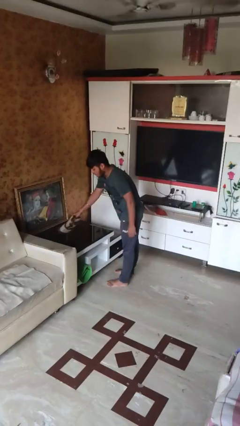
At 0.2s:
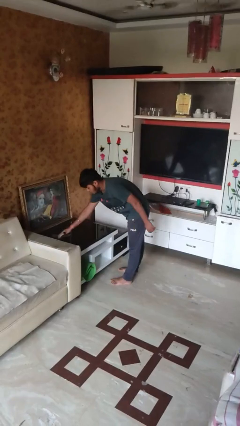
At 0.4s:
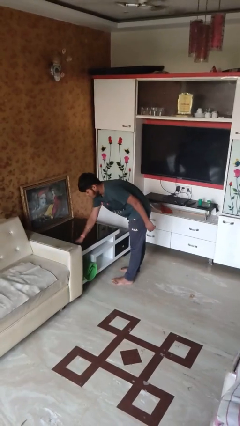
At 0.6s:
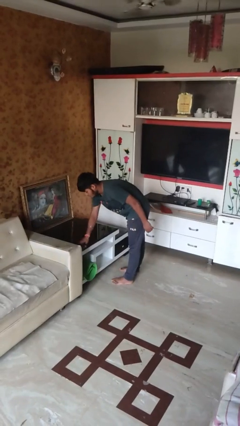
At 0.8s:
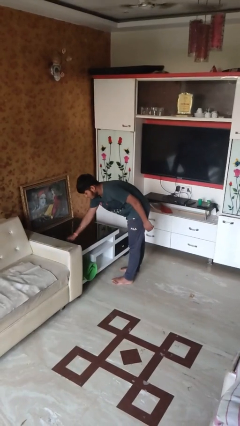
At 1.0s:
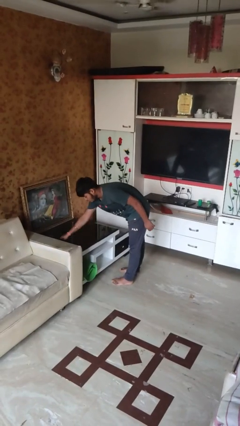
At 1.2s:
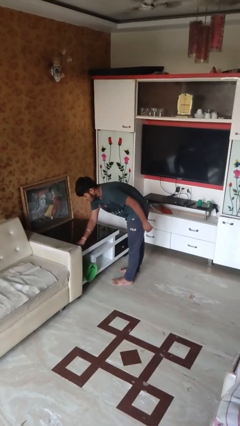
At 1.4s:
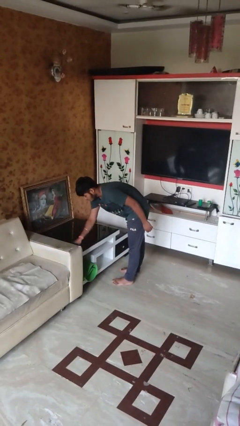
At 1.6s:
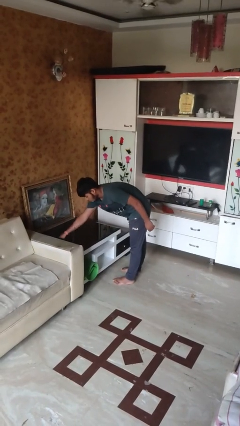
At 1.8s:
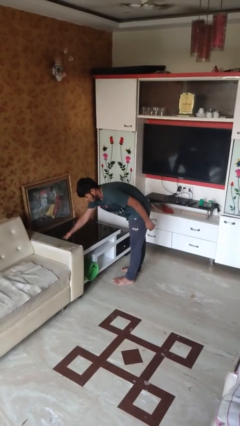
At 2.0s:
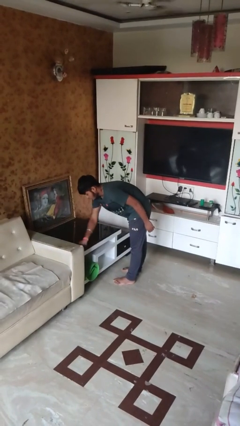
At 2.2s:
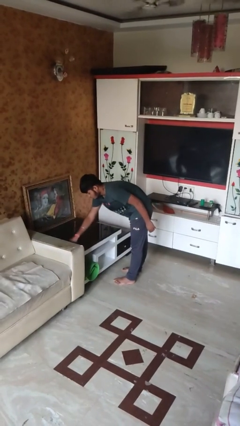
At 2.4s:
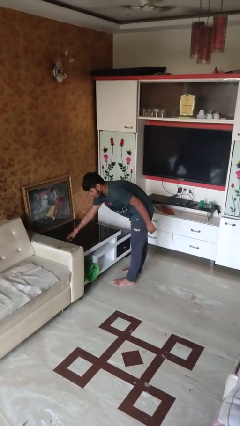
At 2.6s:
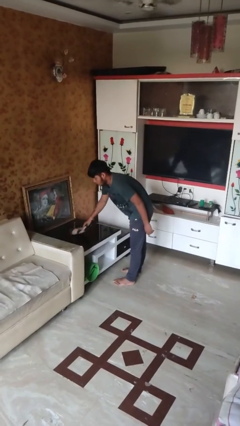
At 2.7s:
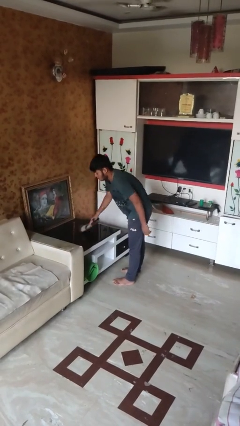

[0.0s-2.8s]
person cleans table with rag

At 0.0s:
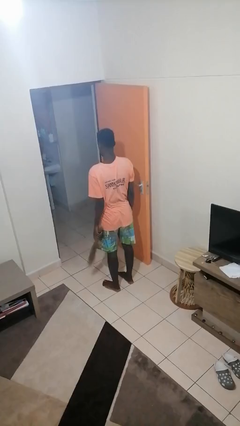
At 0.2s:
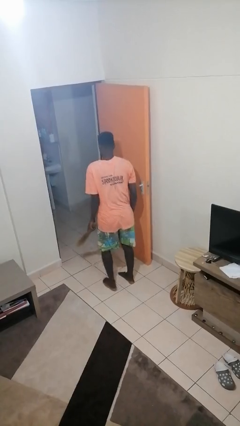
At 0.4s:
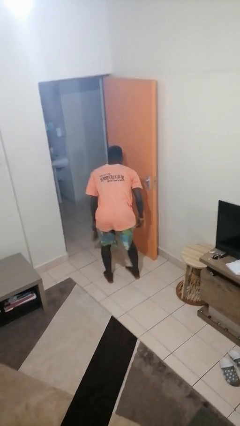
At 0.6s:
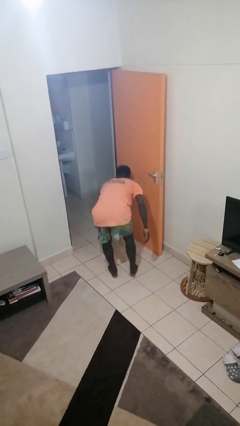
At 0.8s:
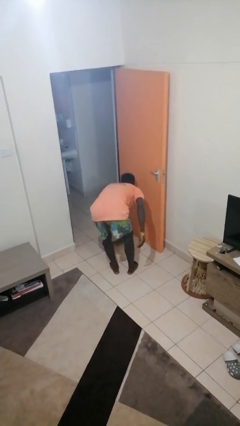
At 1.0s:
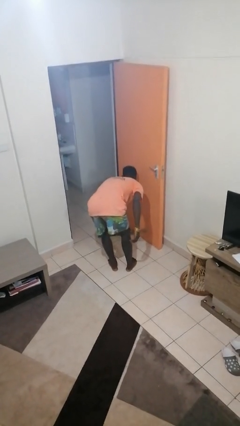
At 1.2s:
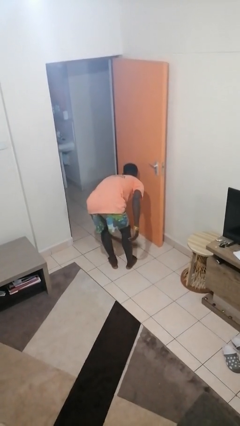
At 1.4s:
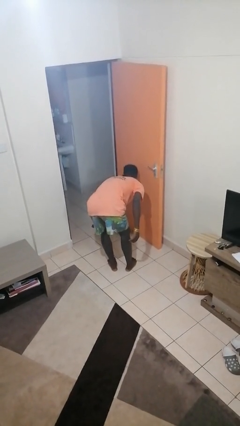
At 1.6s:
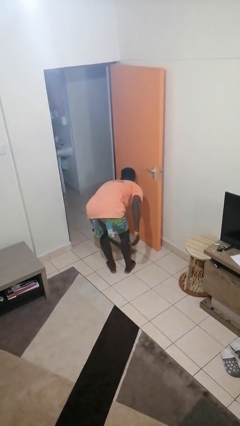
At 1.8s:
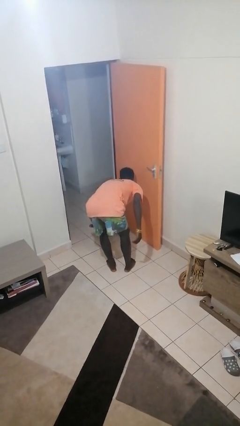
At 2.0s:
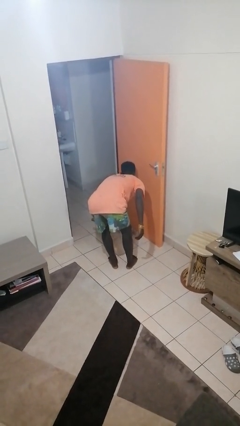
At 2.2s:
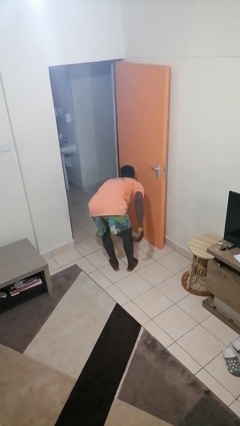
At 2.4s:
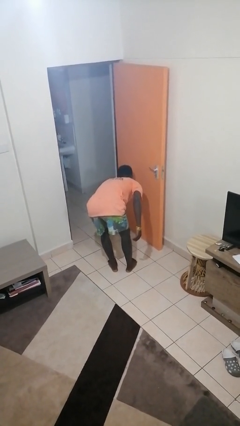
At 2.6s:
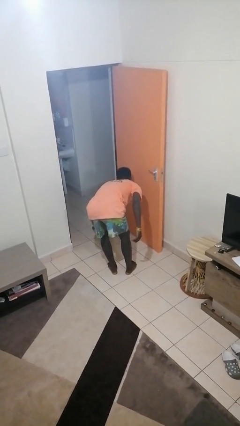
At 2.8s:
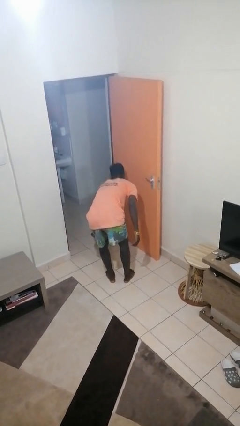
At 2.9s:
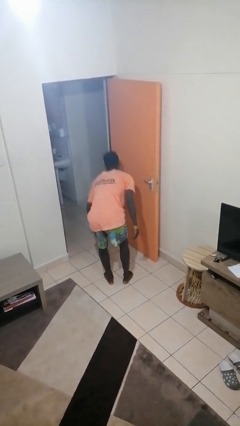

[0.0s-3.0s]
person sweeps floor

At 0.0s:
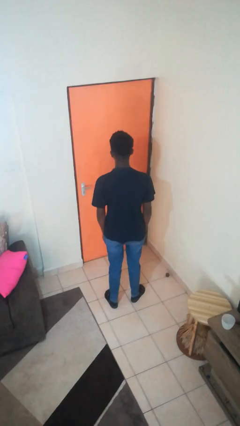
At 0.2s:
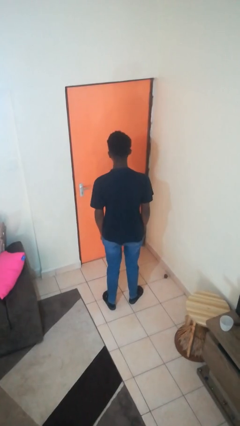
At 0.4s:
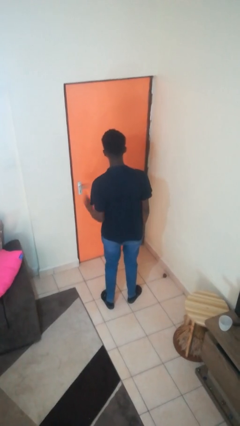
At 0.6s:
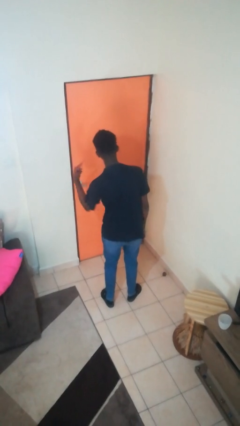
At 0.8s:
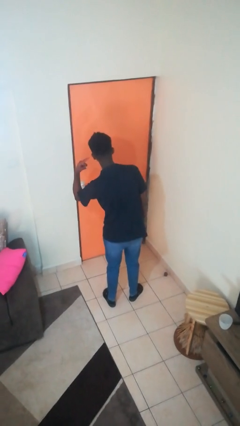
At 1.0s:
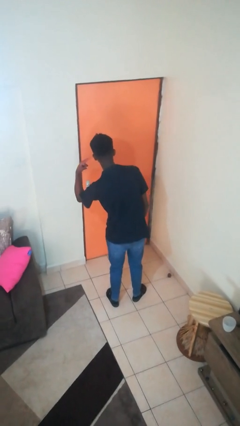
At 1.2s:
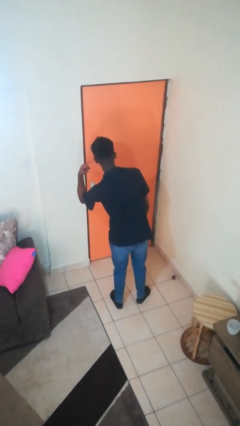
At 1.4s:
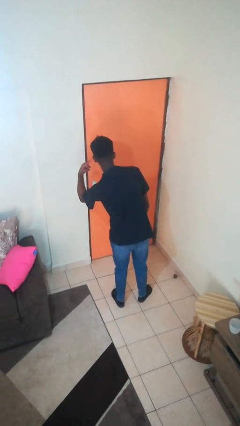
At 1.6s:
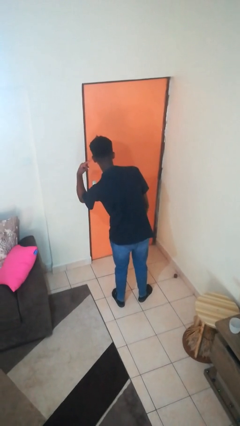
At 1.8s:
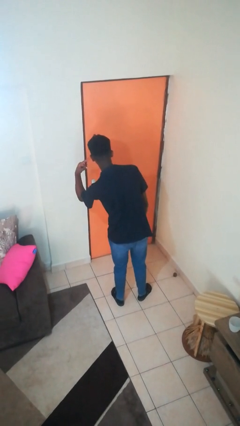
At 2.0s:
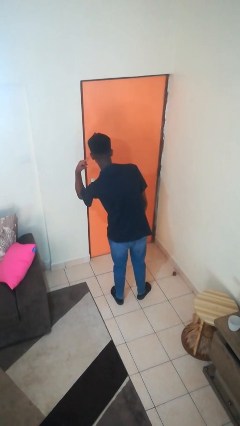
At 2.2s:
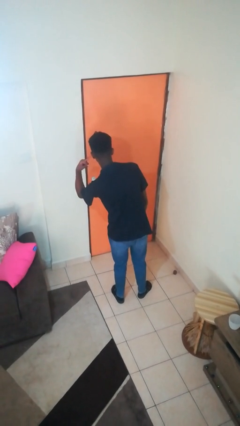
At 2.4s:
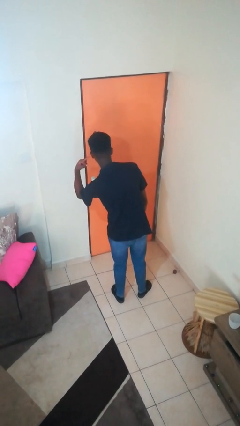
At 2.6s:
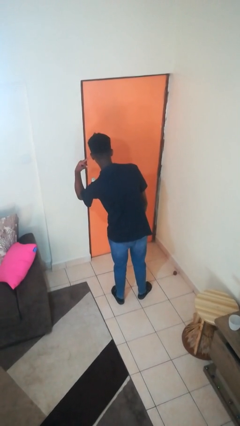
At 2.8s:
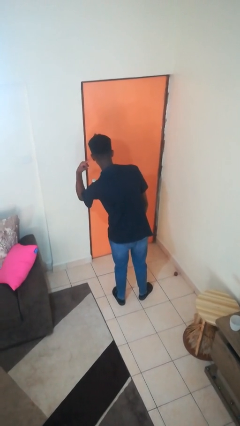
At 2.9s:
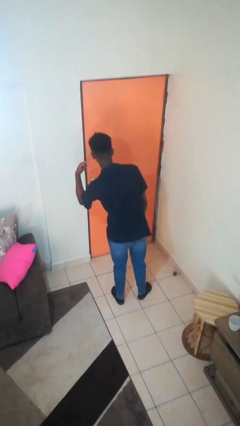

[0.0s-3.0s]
person gestures listen closely

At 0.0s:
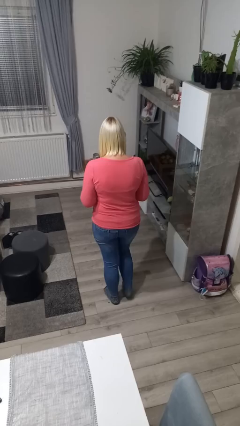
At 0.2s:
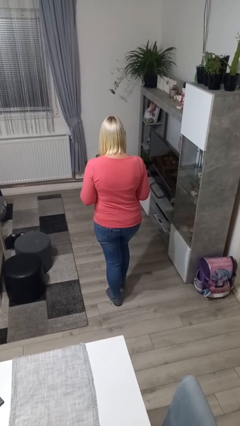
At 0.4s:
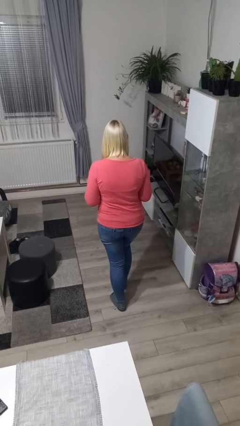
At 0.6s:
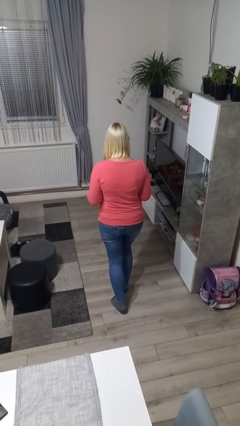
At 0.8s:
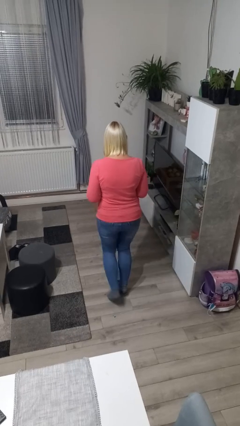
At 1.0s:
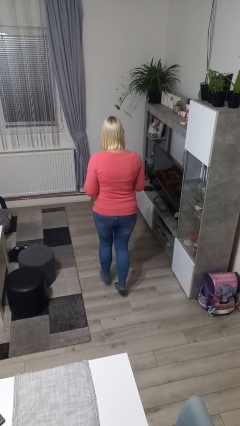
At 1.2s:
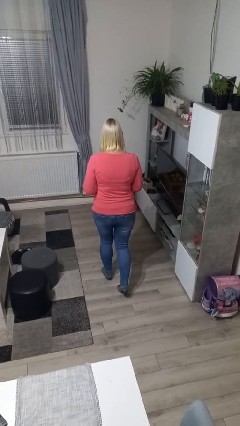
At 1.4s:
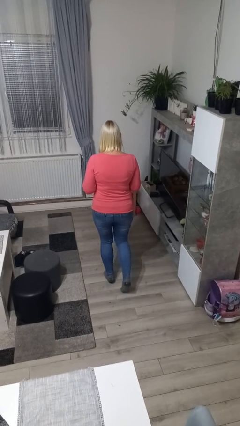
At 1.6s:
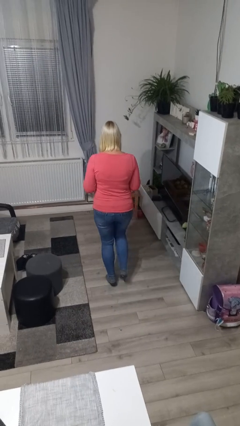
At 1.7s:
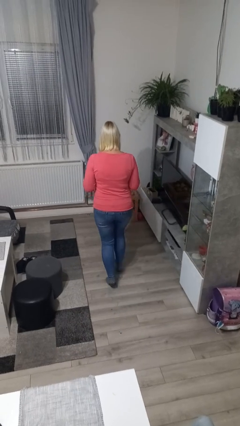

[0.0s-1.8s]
person walks tiptoe

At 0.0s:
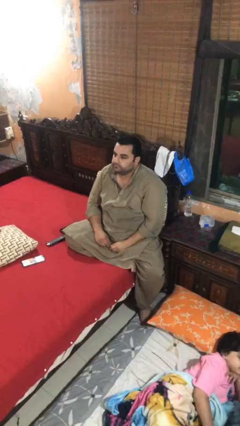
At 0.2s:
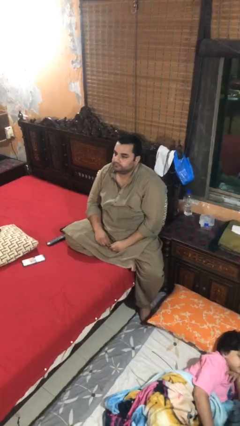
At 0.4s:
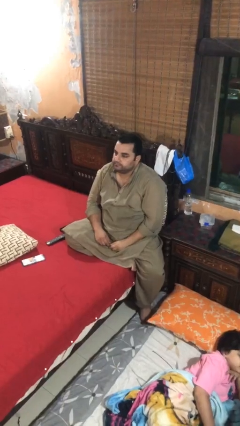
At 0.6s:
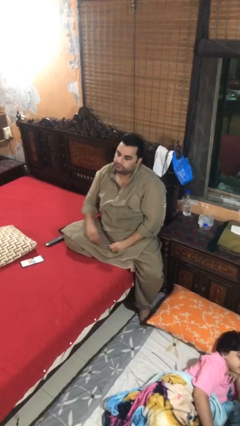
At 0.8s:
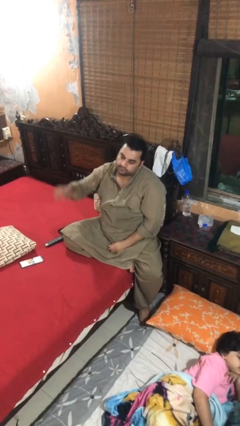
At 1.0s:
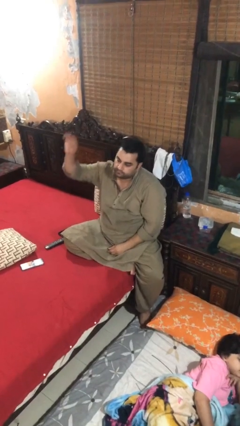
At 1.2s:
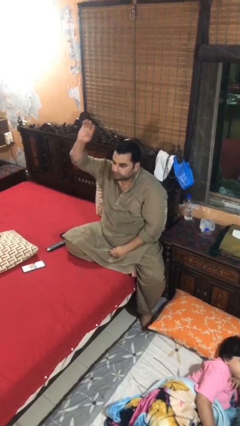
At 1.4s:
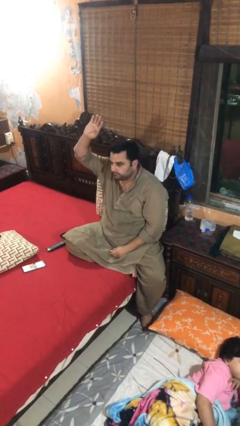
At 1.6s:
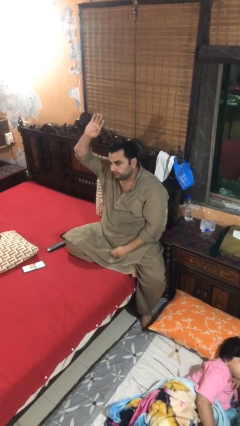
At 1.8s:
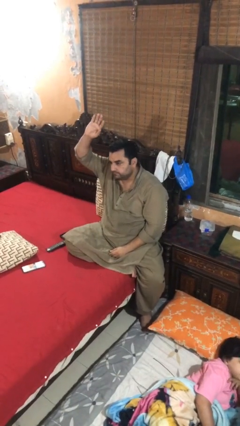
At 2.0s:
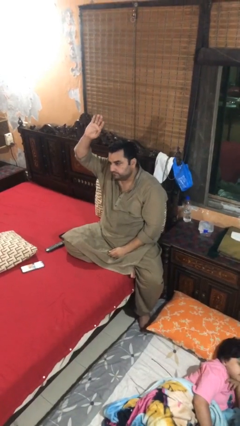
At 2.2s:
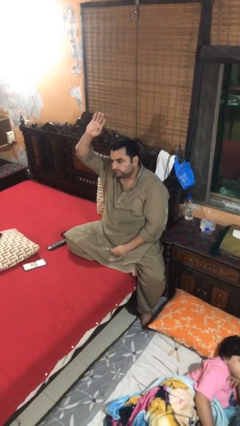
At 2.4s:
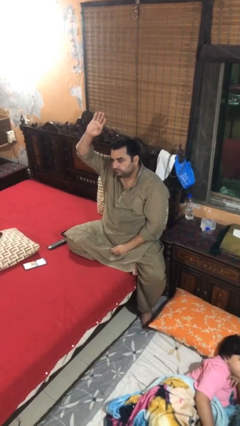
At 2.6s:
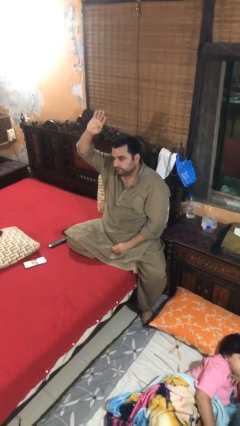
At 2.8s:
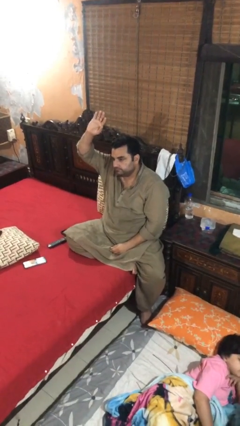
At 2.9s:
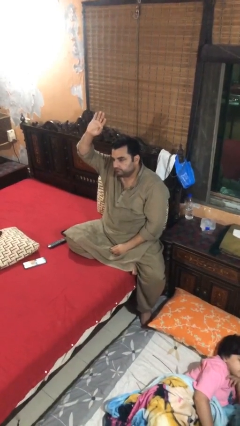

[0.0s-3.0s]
person gestures raise hand

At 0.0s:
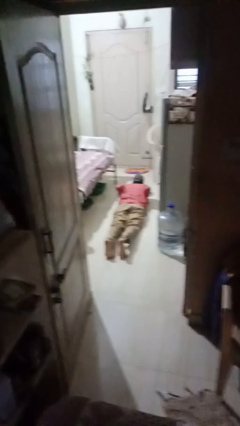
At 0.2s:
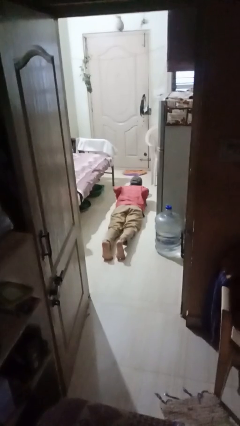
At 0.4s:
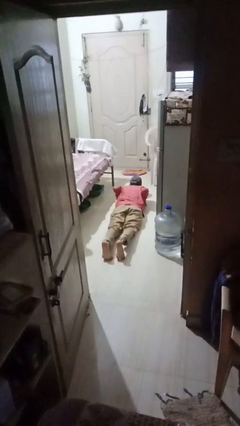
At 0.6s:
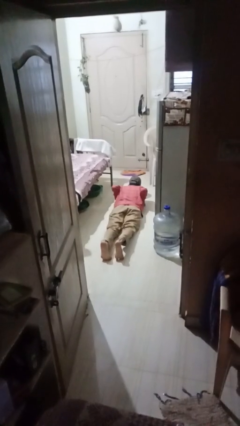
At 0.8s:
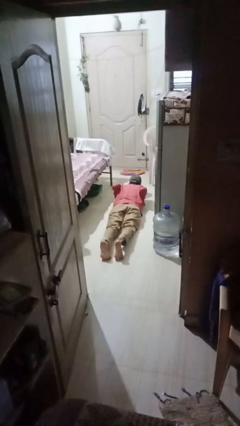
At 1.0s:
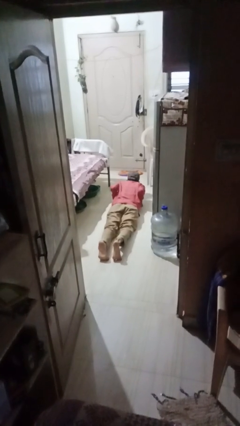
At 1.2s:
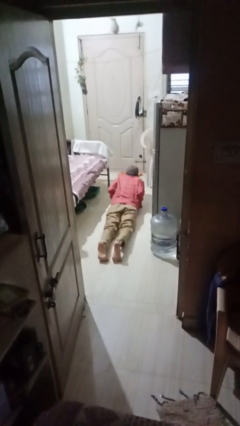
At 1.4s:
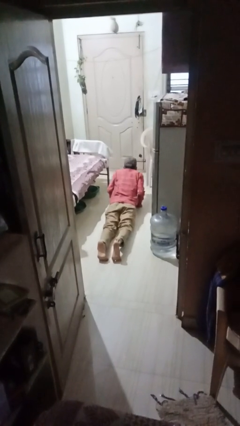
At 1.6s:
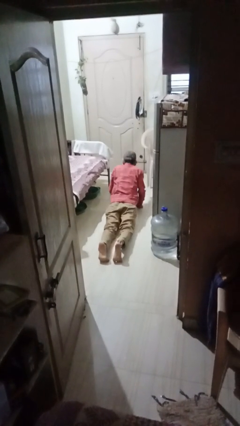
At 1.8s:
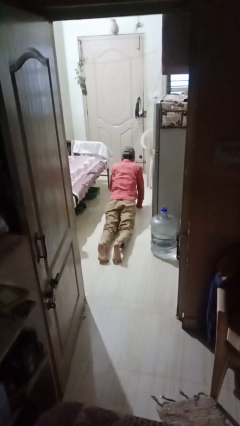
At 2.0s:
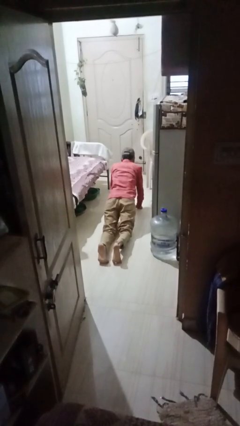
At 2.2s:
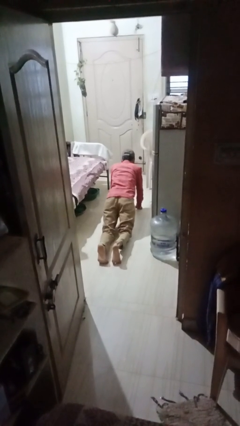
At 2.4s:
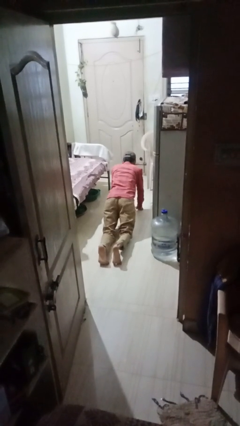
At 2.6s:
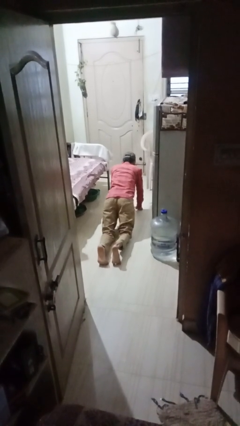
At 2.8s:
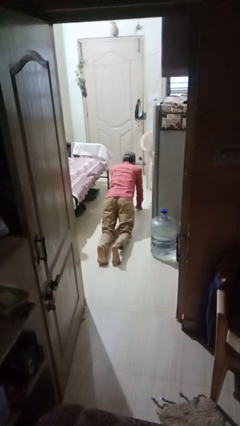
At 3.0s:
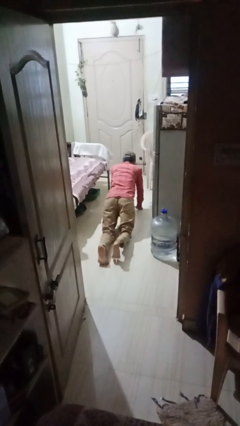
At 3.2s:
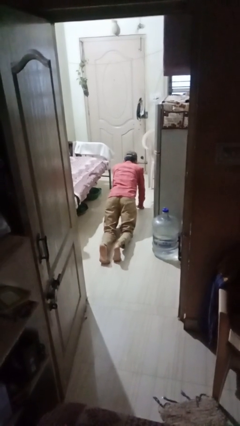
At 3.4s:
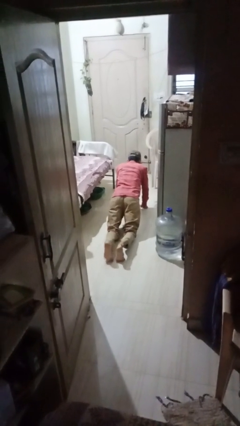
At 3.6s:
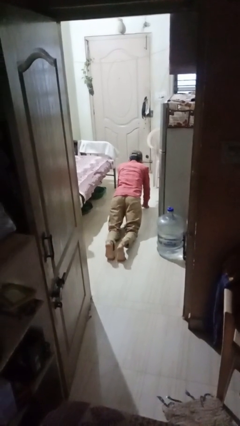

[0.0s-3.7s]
person exercises with pushup

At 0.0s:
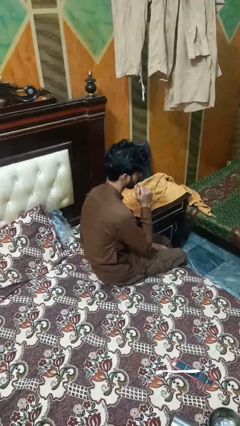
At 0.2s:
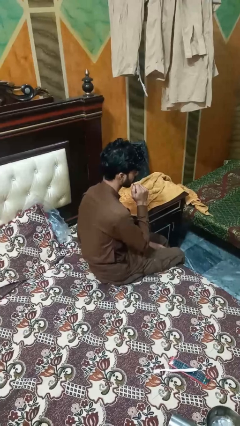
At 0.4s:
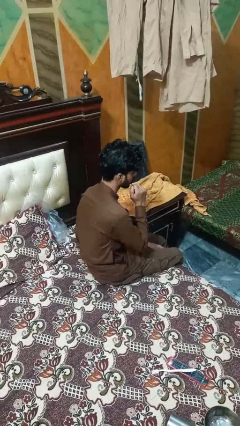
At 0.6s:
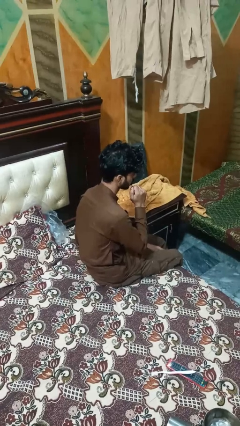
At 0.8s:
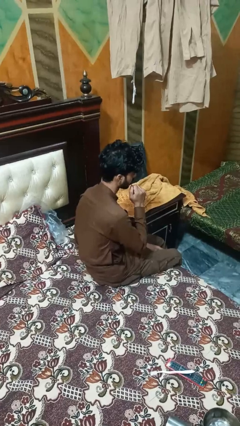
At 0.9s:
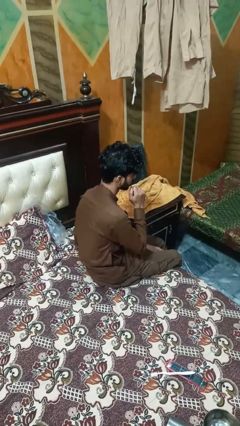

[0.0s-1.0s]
person flosses
